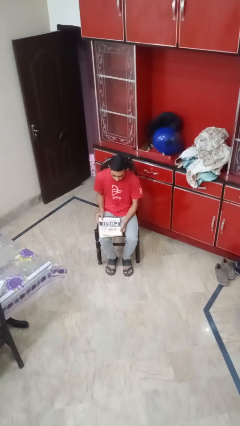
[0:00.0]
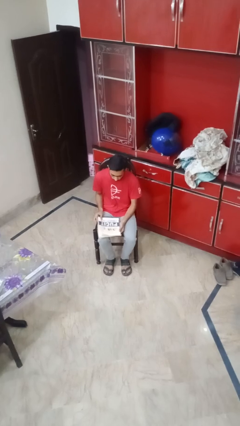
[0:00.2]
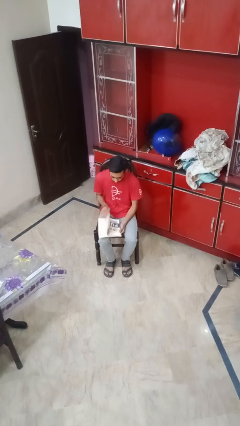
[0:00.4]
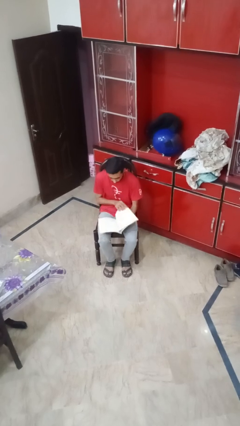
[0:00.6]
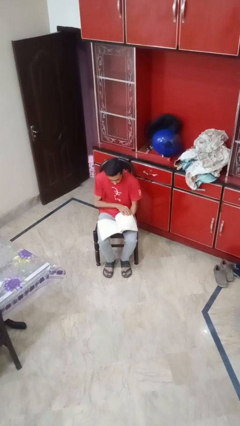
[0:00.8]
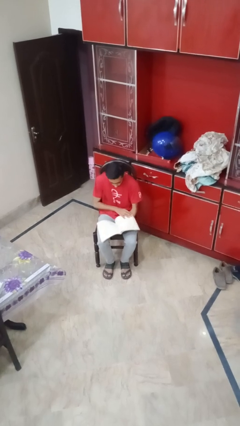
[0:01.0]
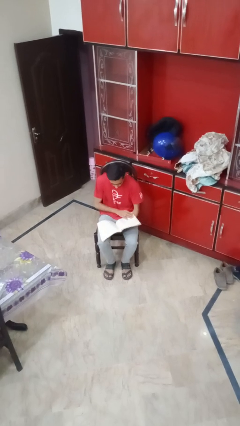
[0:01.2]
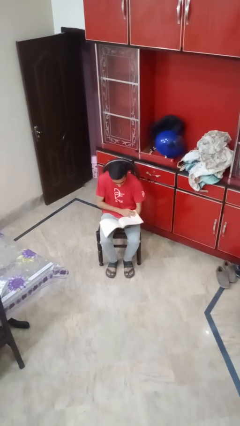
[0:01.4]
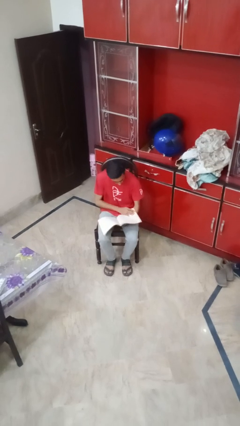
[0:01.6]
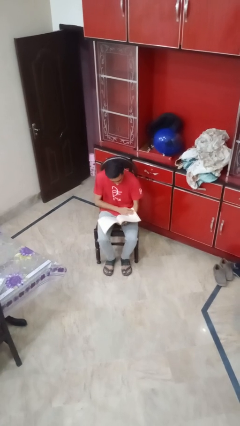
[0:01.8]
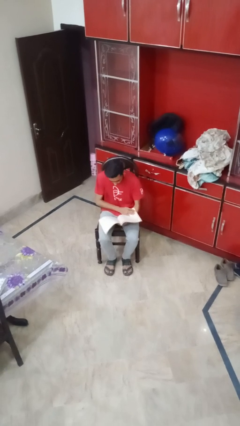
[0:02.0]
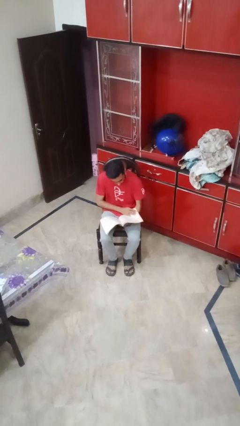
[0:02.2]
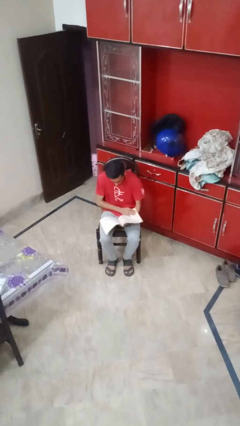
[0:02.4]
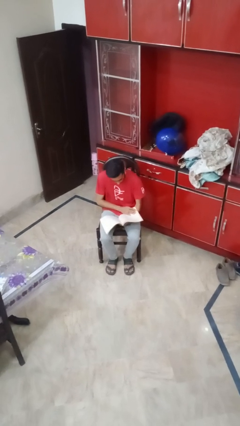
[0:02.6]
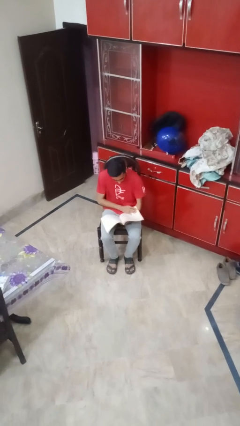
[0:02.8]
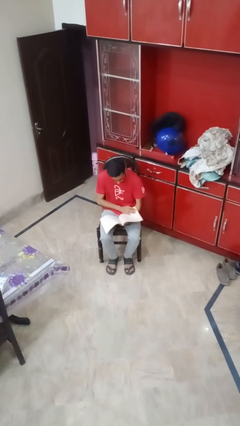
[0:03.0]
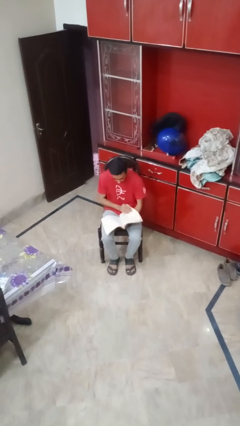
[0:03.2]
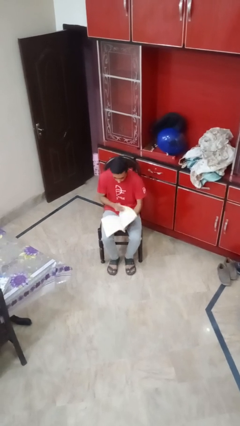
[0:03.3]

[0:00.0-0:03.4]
person reads magazine

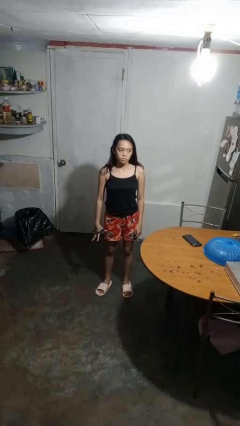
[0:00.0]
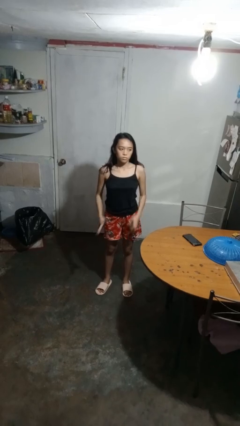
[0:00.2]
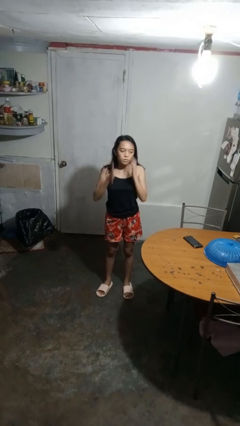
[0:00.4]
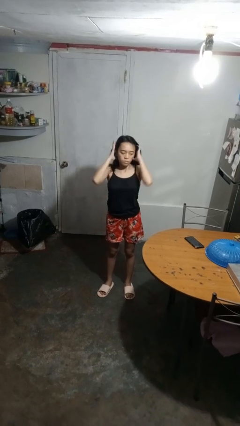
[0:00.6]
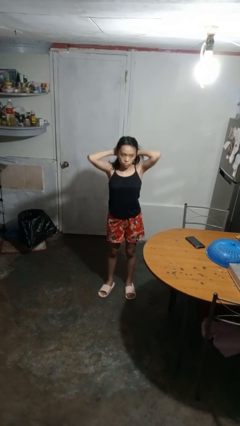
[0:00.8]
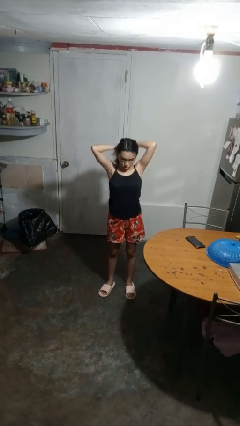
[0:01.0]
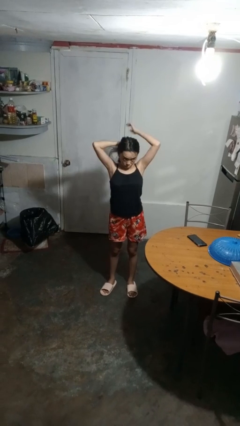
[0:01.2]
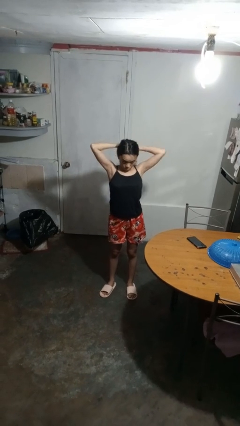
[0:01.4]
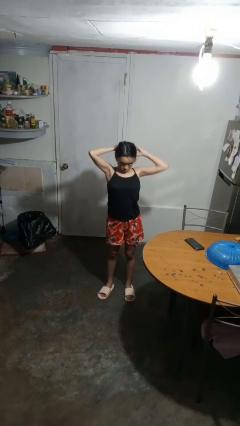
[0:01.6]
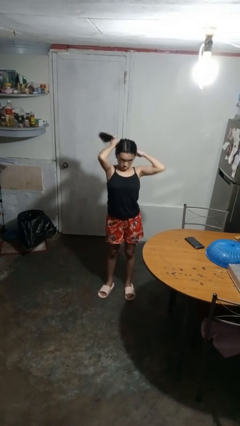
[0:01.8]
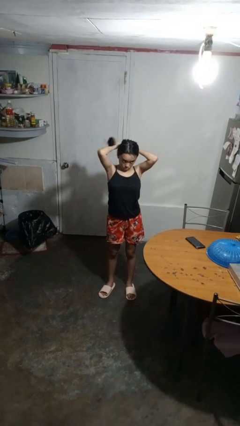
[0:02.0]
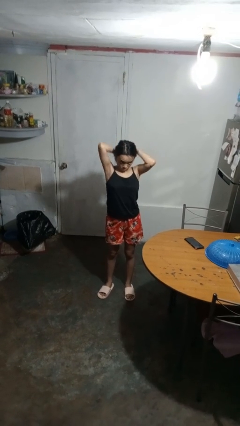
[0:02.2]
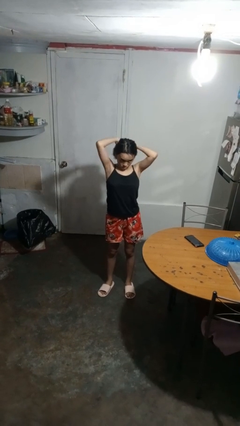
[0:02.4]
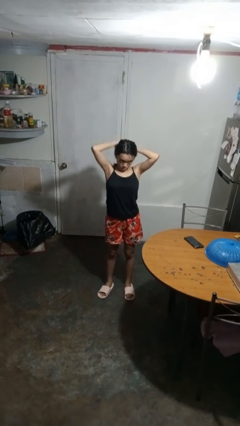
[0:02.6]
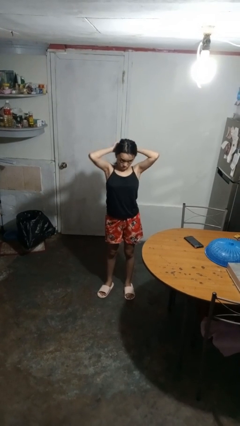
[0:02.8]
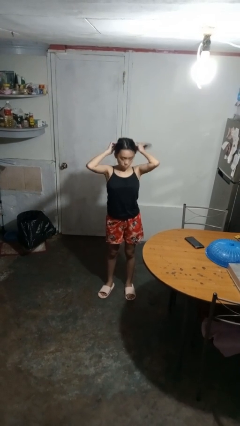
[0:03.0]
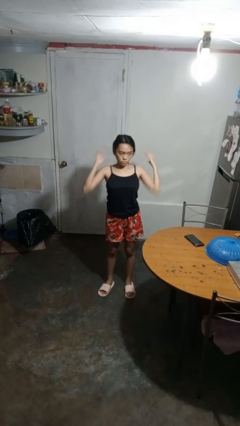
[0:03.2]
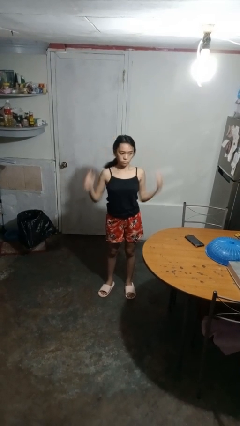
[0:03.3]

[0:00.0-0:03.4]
person puts hair in ponytail

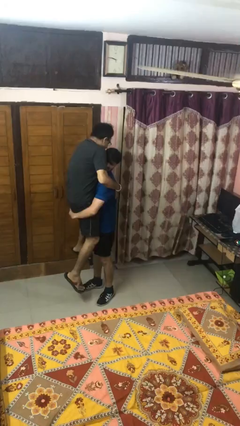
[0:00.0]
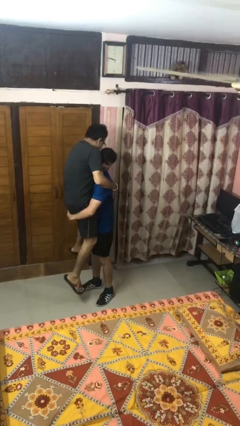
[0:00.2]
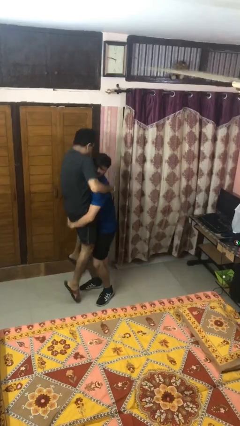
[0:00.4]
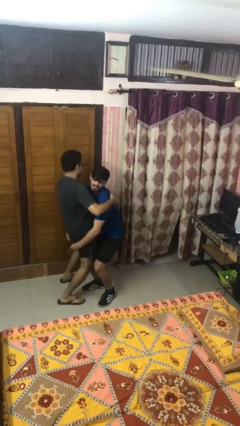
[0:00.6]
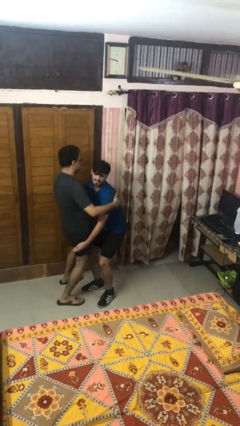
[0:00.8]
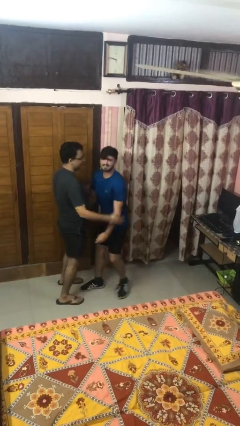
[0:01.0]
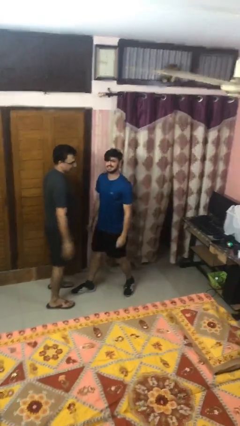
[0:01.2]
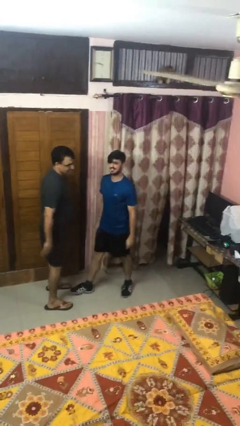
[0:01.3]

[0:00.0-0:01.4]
person puts down person

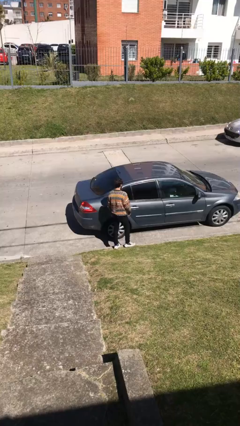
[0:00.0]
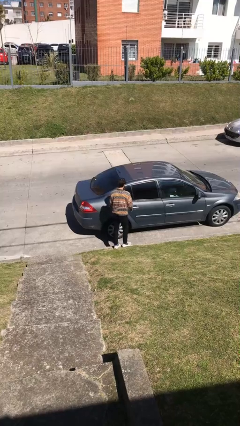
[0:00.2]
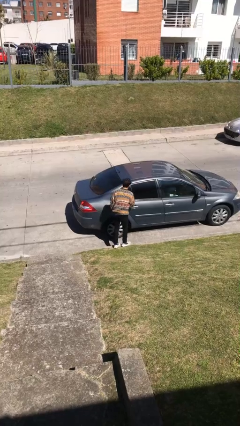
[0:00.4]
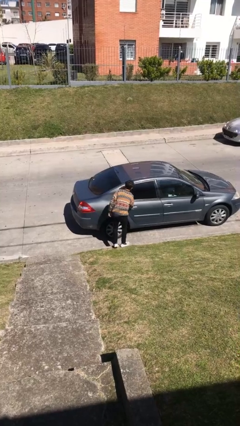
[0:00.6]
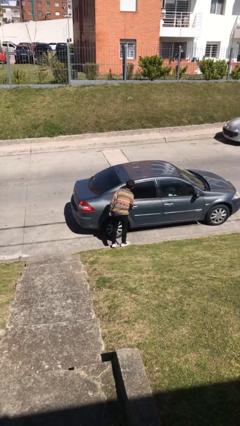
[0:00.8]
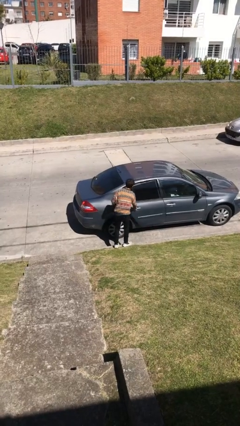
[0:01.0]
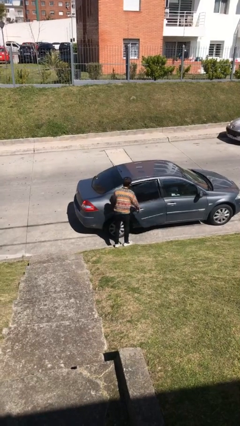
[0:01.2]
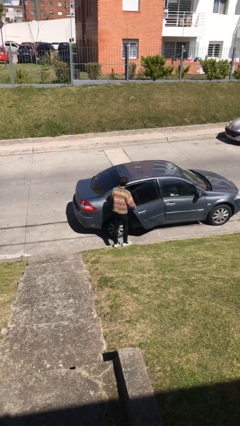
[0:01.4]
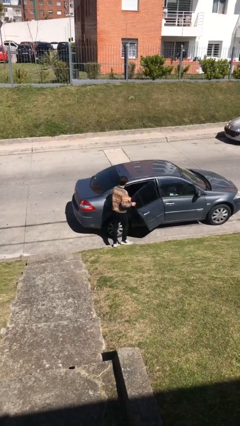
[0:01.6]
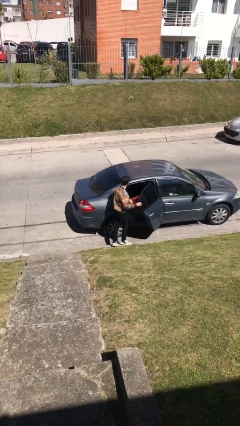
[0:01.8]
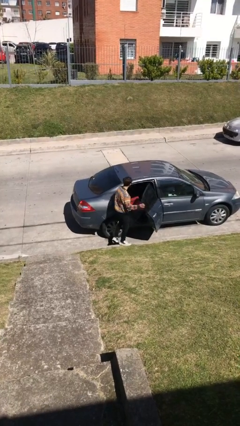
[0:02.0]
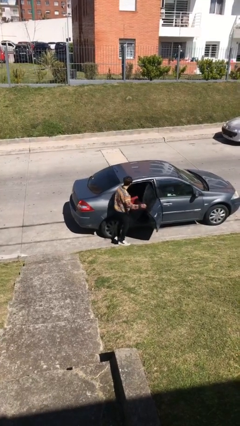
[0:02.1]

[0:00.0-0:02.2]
person opens car door

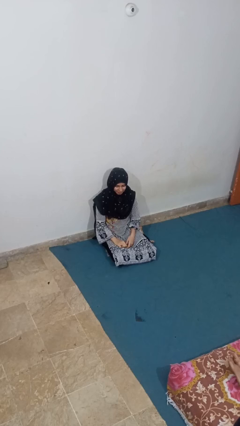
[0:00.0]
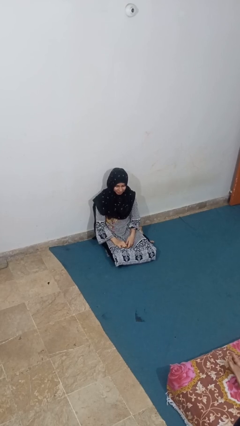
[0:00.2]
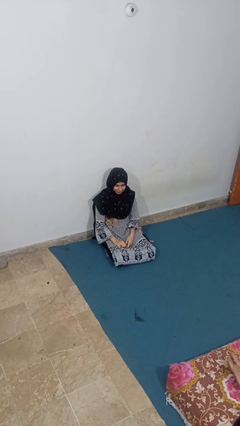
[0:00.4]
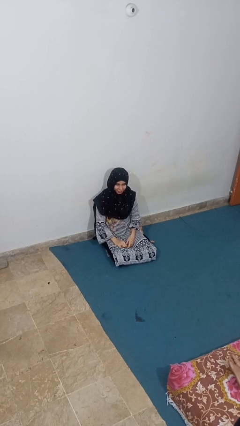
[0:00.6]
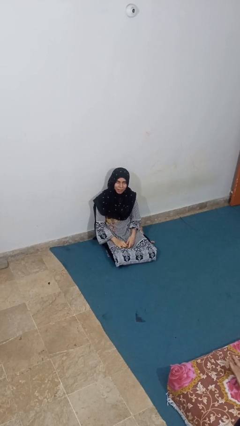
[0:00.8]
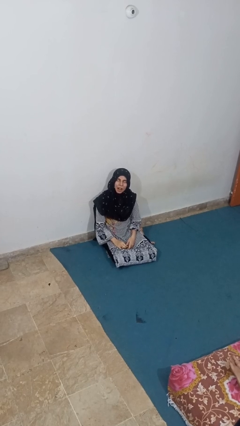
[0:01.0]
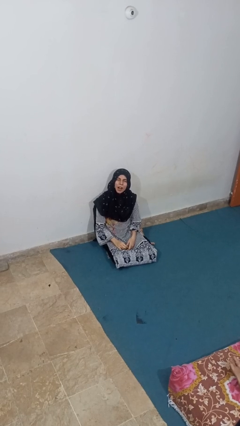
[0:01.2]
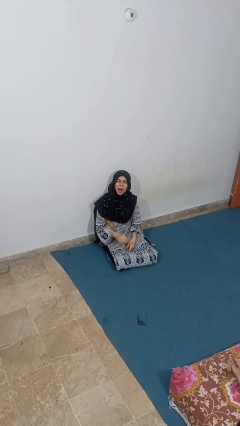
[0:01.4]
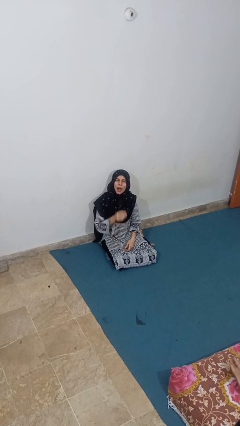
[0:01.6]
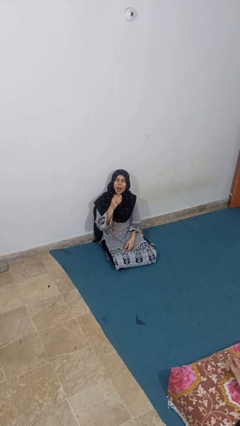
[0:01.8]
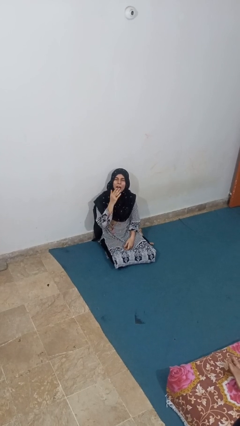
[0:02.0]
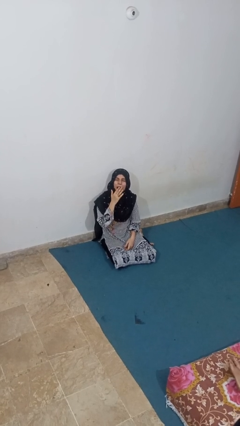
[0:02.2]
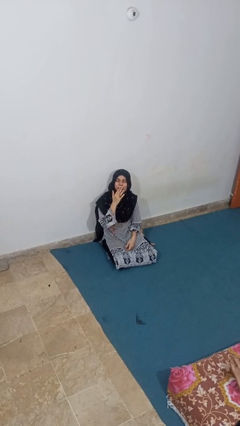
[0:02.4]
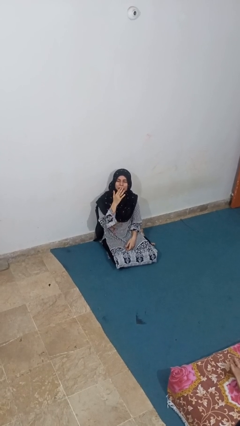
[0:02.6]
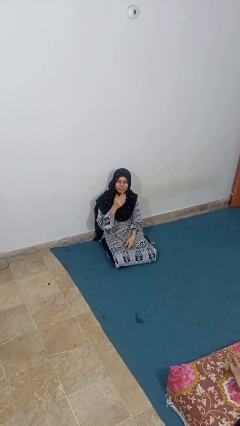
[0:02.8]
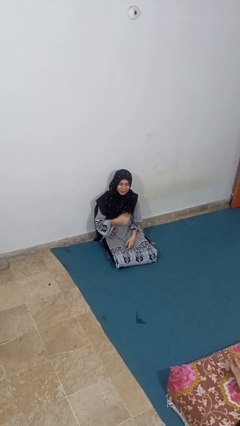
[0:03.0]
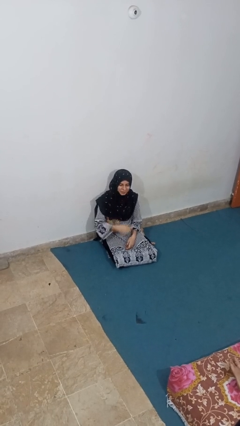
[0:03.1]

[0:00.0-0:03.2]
person yawns

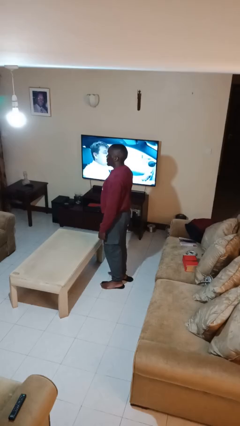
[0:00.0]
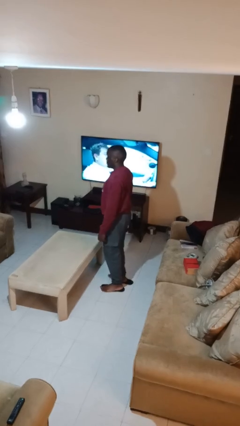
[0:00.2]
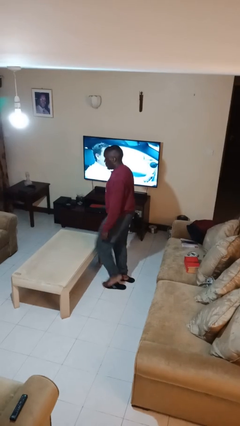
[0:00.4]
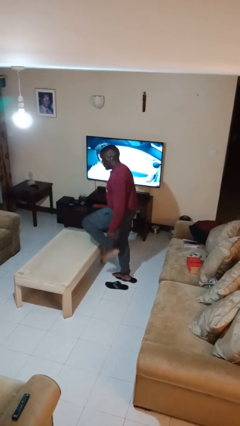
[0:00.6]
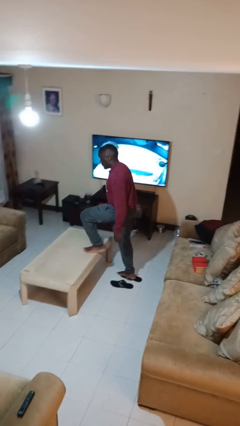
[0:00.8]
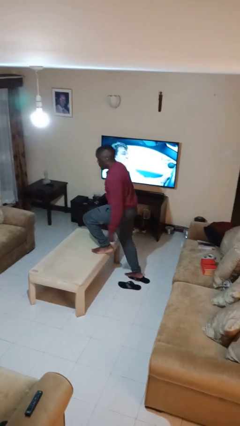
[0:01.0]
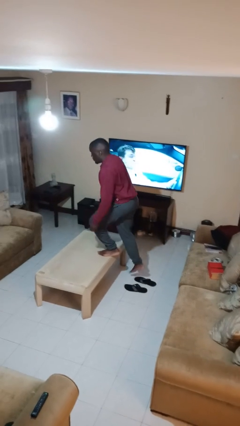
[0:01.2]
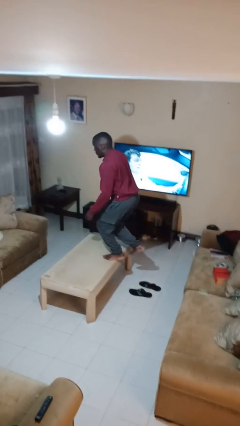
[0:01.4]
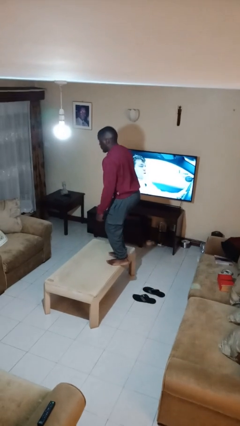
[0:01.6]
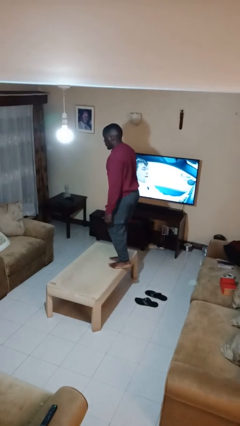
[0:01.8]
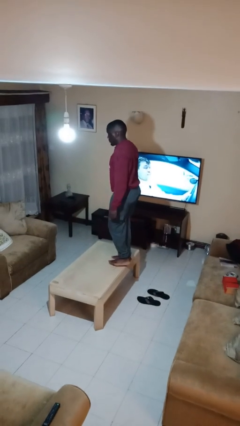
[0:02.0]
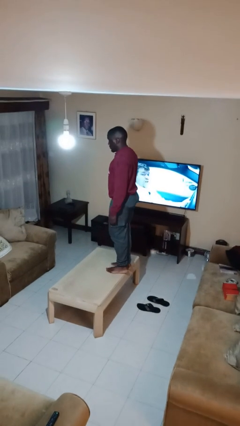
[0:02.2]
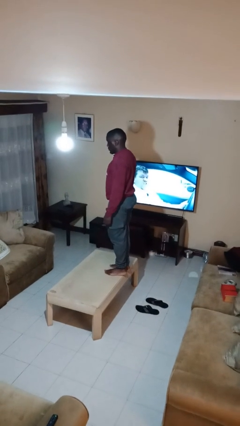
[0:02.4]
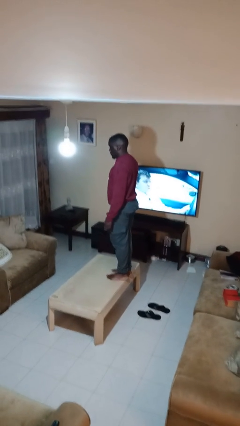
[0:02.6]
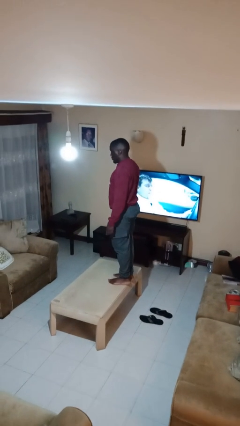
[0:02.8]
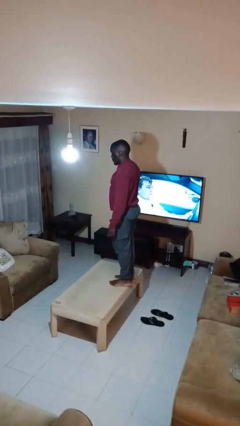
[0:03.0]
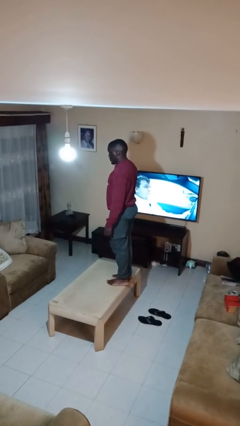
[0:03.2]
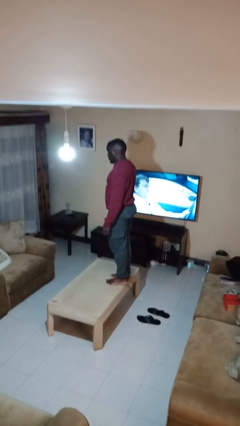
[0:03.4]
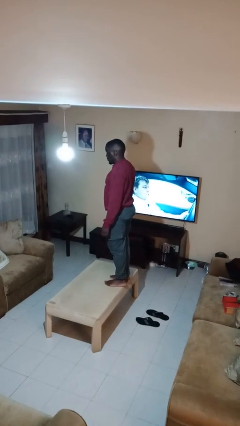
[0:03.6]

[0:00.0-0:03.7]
person climbs on table
